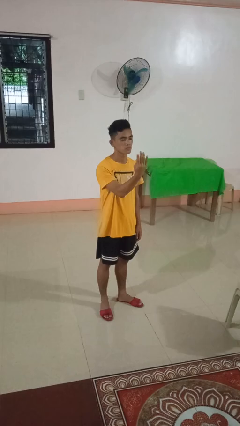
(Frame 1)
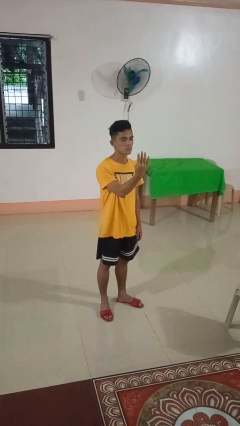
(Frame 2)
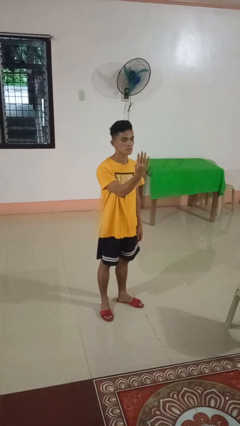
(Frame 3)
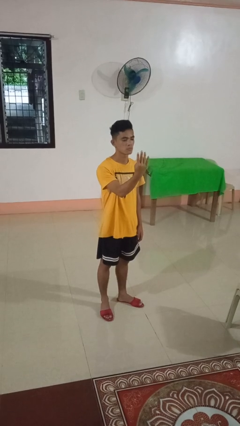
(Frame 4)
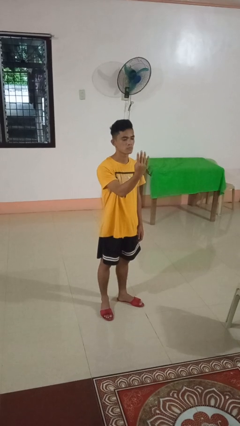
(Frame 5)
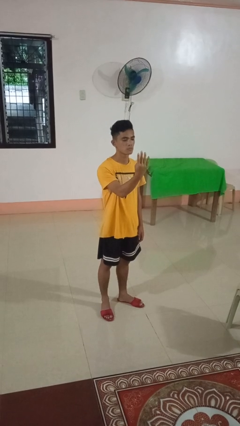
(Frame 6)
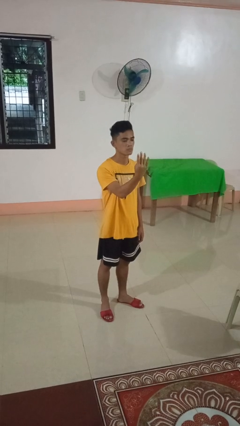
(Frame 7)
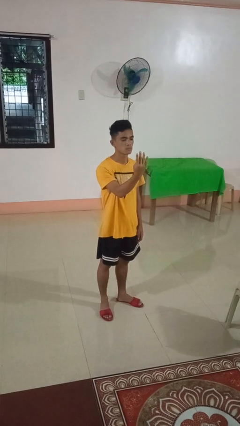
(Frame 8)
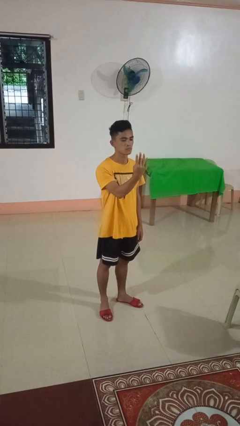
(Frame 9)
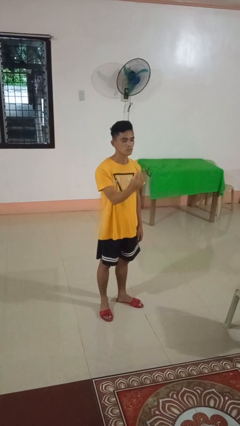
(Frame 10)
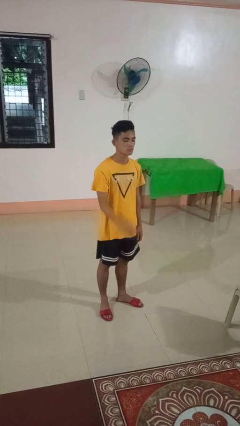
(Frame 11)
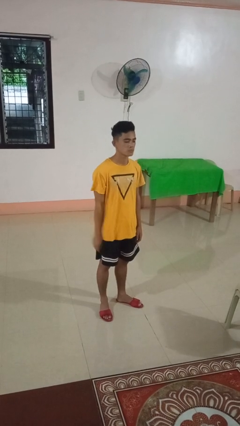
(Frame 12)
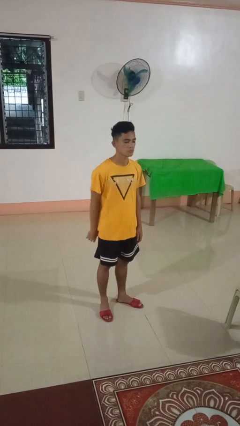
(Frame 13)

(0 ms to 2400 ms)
person gestures number four

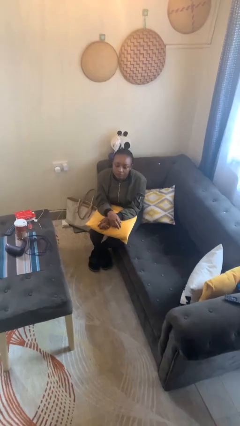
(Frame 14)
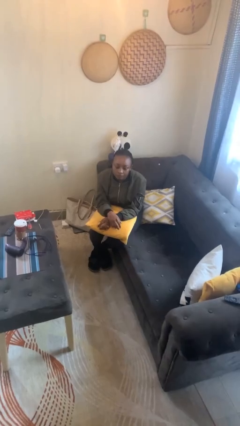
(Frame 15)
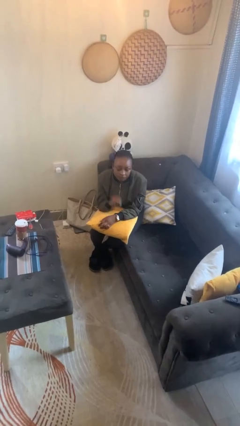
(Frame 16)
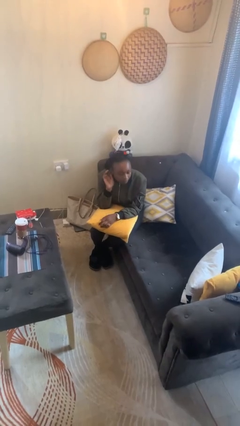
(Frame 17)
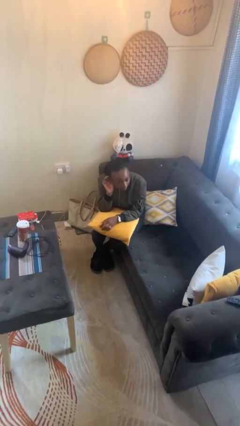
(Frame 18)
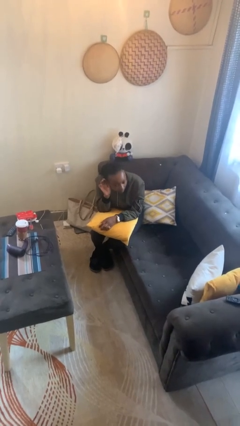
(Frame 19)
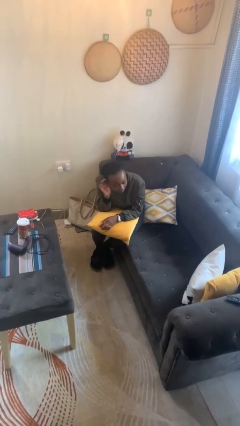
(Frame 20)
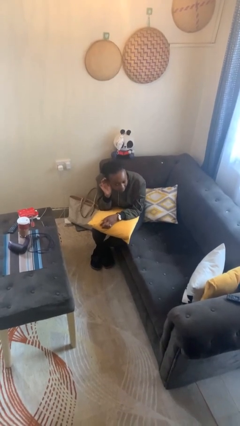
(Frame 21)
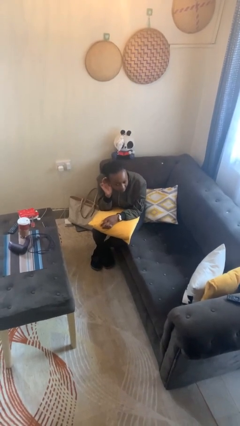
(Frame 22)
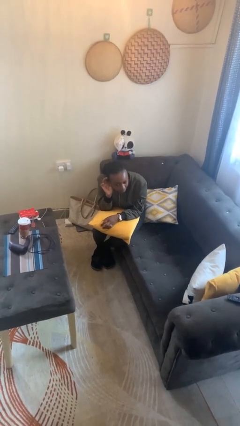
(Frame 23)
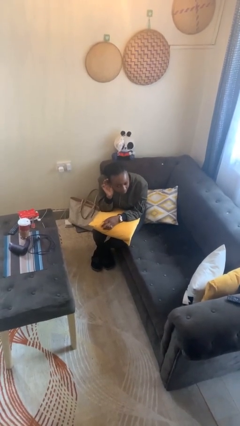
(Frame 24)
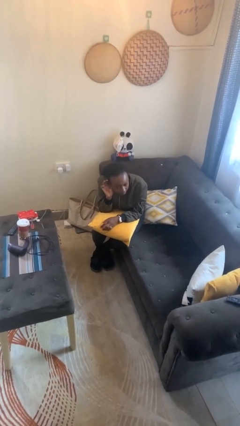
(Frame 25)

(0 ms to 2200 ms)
person gestures listen closely

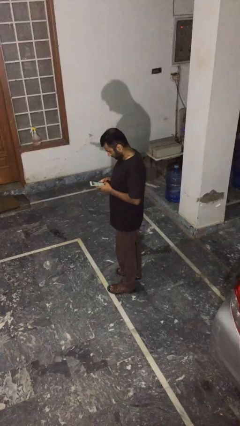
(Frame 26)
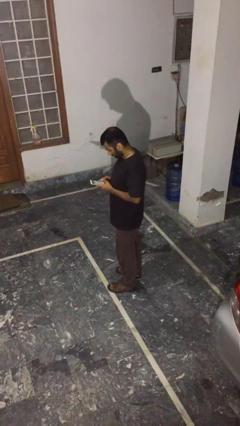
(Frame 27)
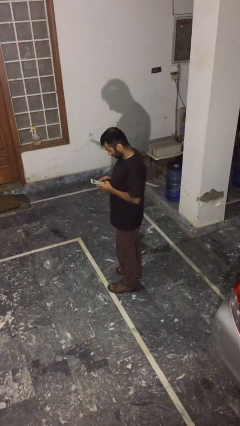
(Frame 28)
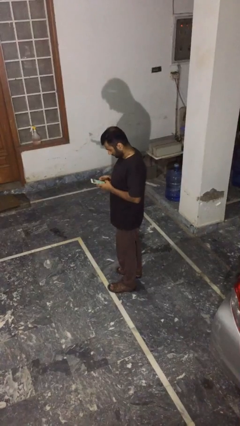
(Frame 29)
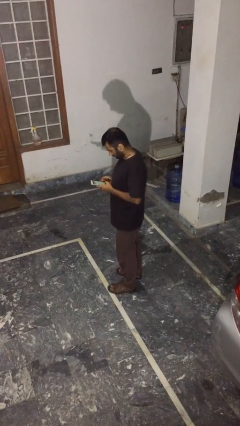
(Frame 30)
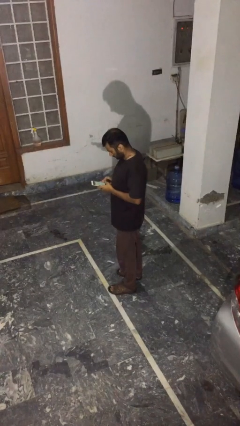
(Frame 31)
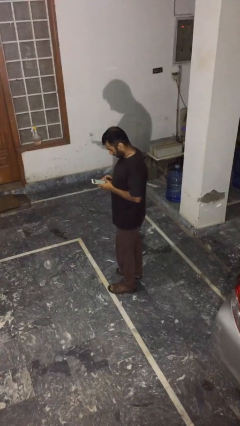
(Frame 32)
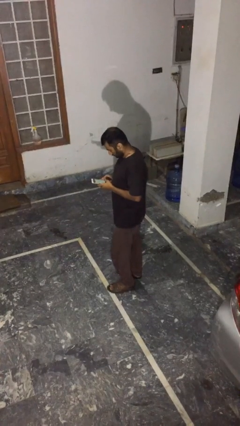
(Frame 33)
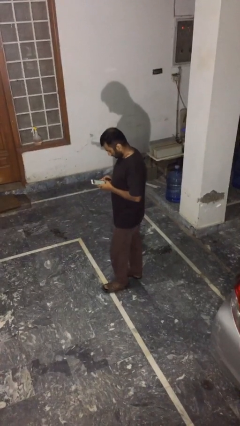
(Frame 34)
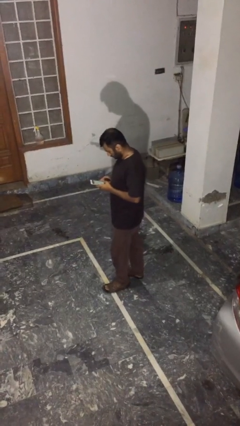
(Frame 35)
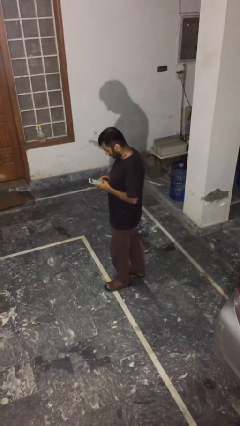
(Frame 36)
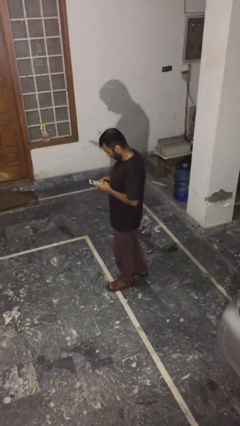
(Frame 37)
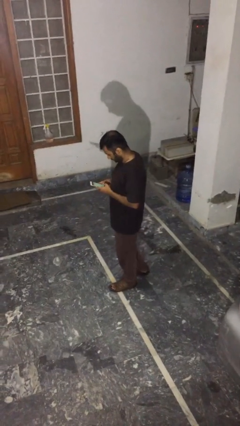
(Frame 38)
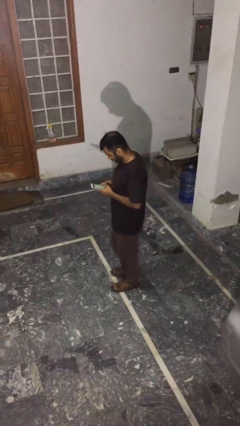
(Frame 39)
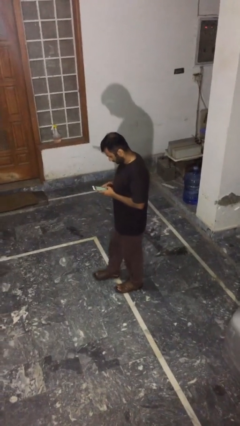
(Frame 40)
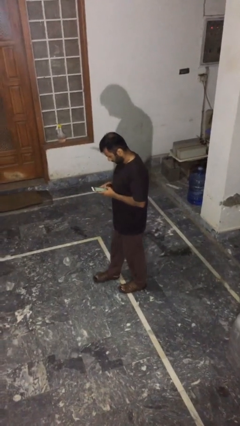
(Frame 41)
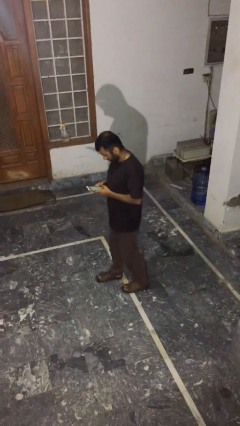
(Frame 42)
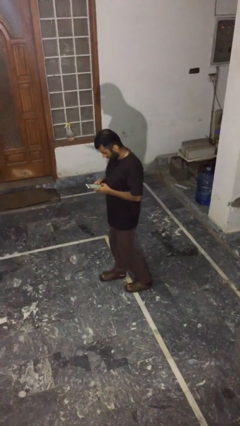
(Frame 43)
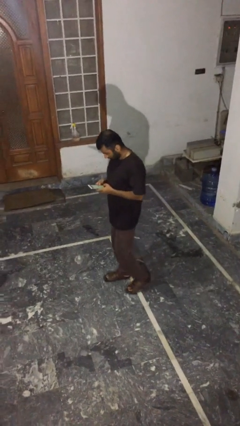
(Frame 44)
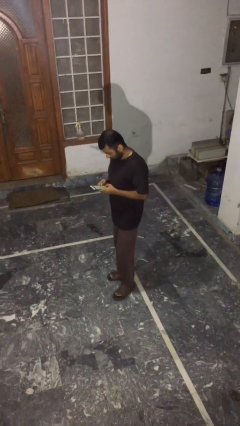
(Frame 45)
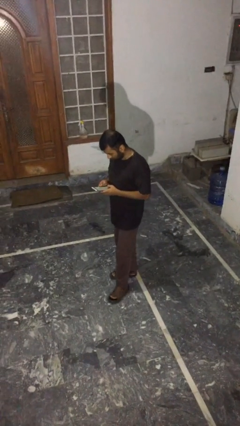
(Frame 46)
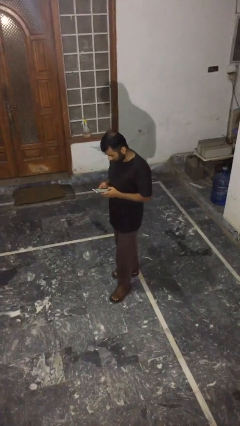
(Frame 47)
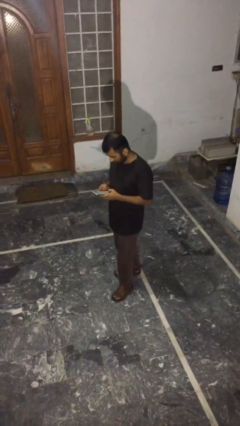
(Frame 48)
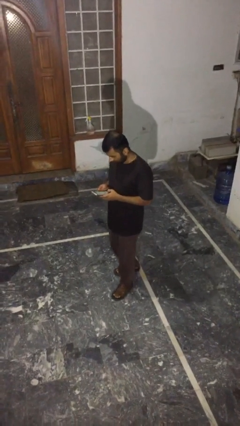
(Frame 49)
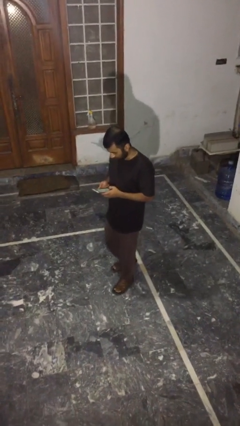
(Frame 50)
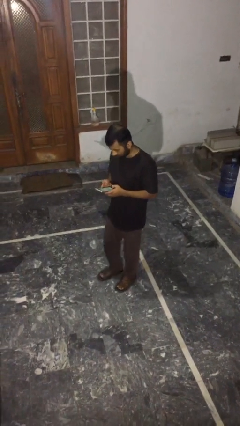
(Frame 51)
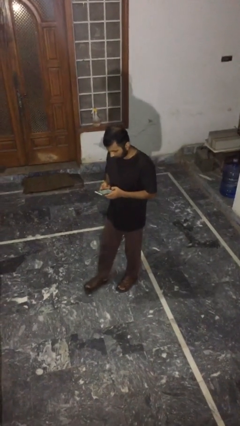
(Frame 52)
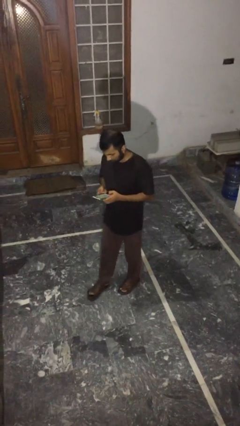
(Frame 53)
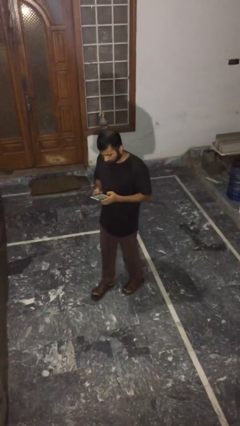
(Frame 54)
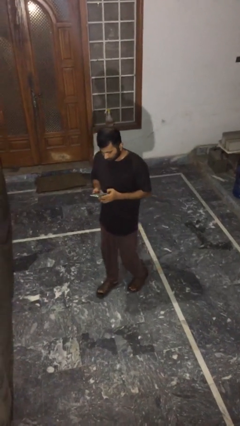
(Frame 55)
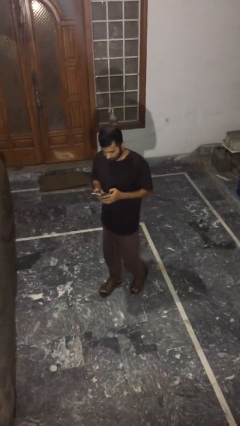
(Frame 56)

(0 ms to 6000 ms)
person texts on phone

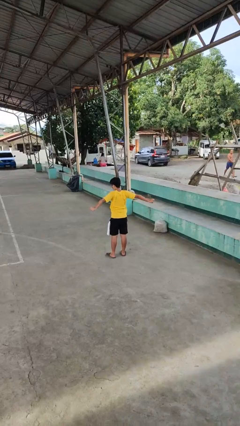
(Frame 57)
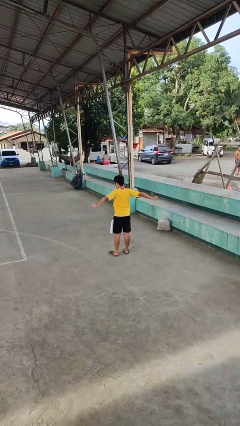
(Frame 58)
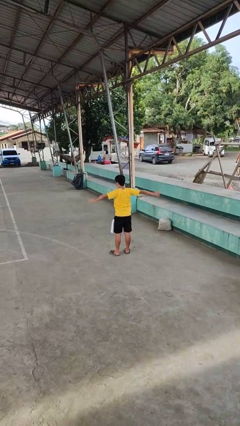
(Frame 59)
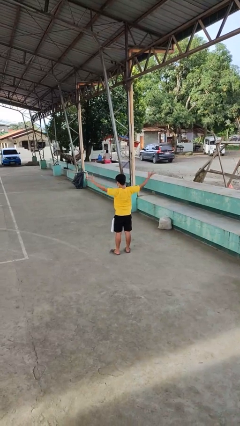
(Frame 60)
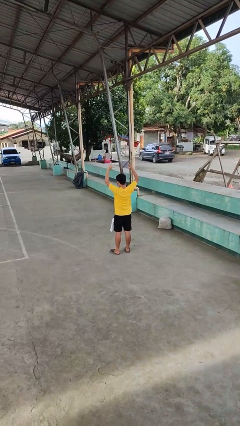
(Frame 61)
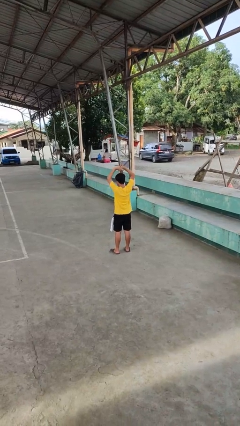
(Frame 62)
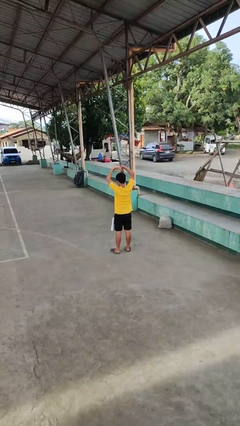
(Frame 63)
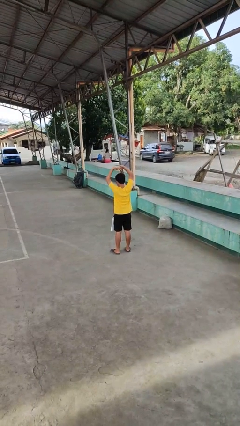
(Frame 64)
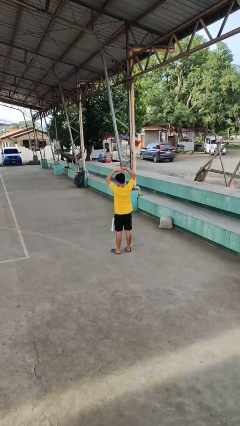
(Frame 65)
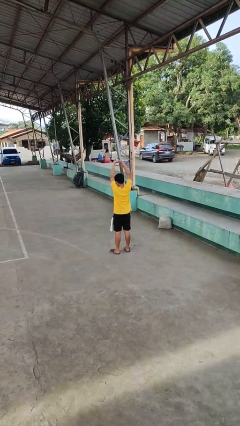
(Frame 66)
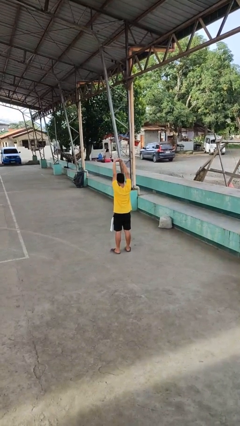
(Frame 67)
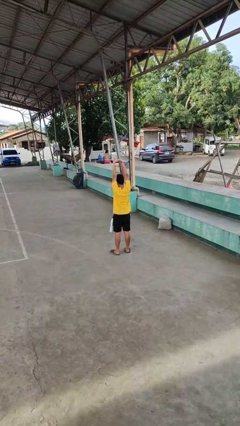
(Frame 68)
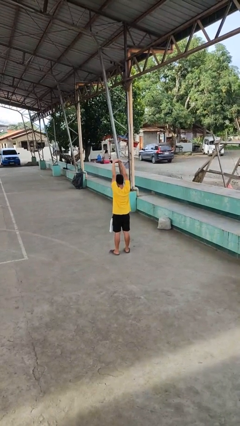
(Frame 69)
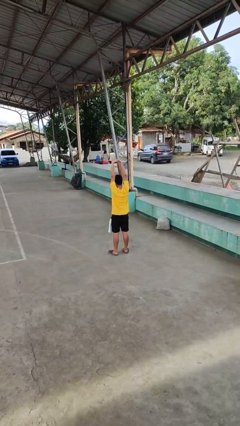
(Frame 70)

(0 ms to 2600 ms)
person stretches arms over head

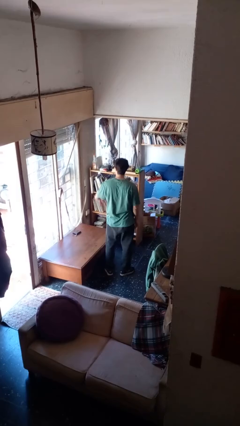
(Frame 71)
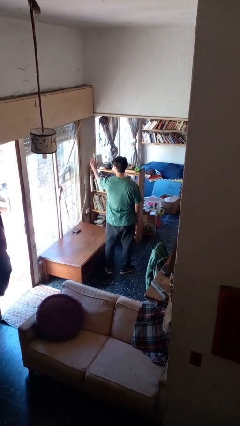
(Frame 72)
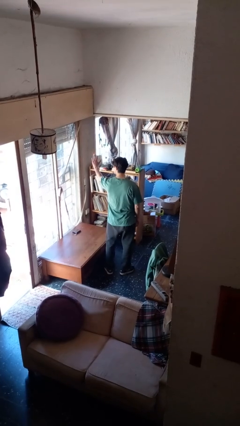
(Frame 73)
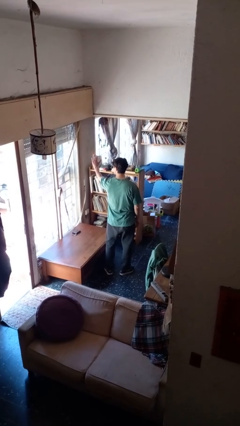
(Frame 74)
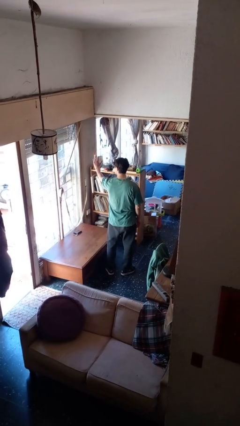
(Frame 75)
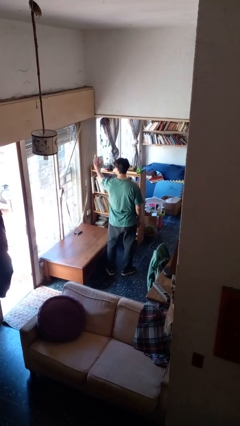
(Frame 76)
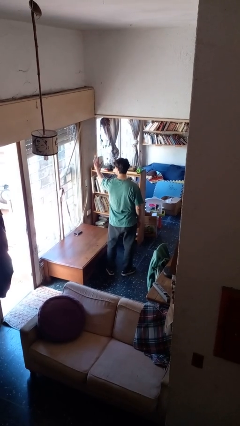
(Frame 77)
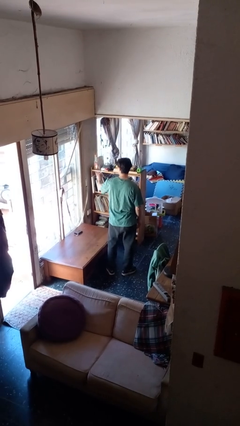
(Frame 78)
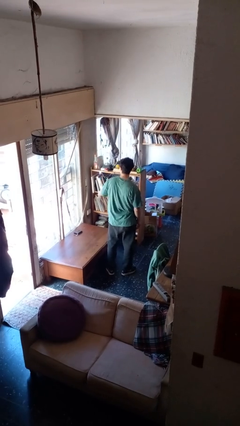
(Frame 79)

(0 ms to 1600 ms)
person gestures stop

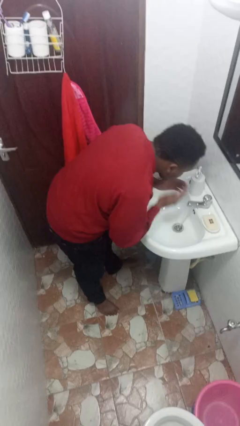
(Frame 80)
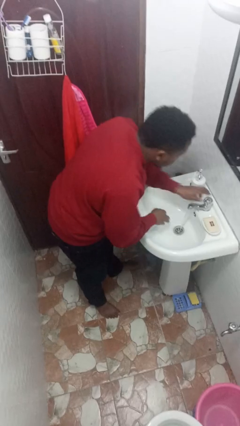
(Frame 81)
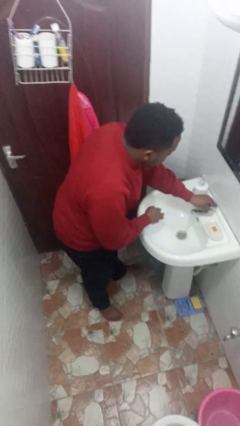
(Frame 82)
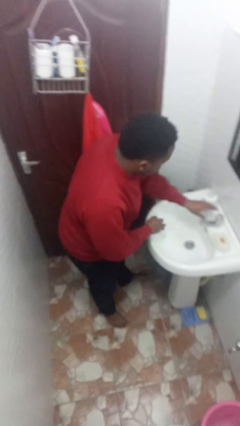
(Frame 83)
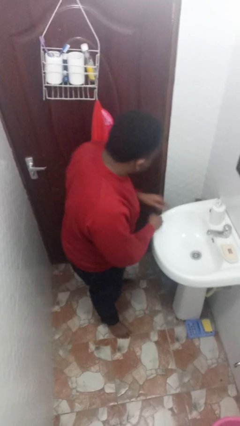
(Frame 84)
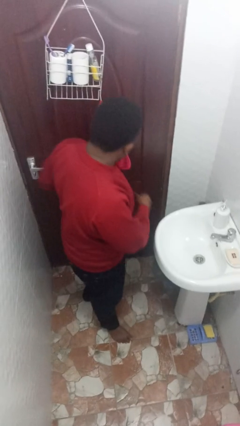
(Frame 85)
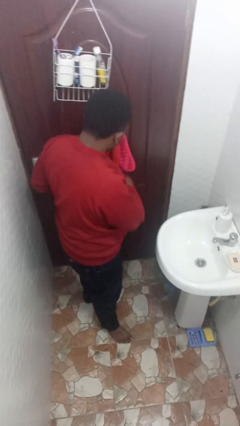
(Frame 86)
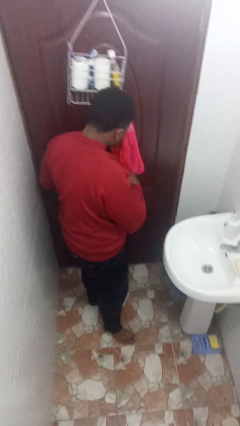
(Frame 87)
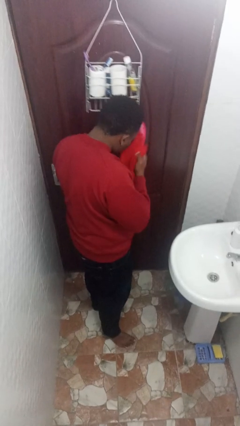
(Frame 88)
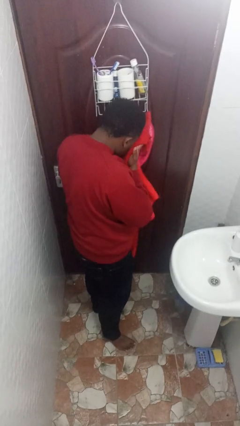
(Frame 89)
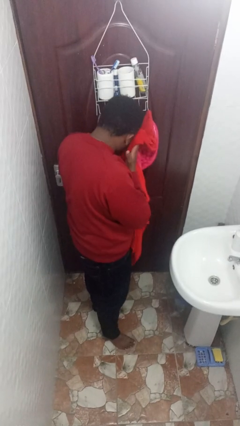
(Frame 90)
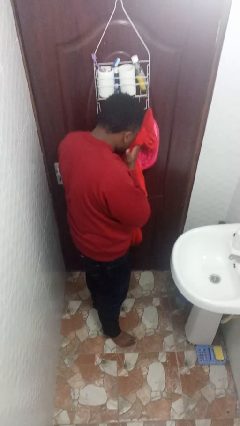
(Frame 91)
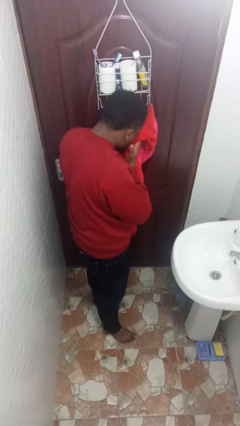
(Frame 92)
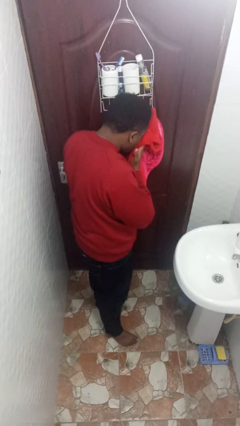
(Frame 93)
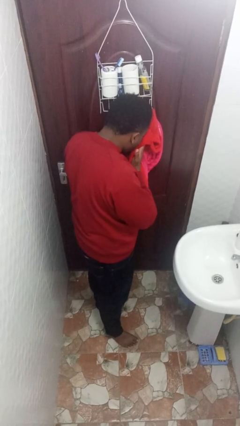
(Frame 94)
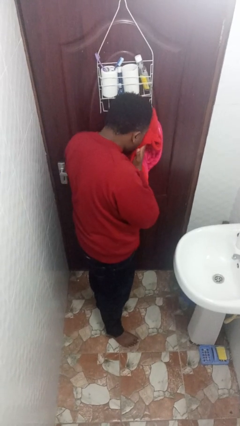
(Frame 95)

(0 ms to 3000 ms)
person dries face with towel
